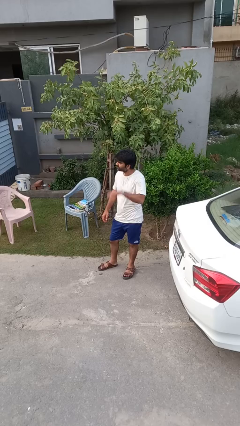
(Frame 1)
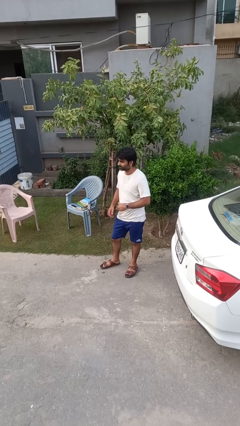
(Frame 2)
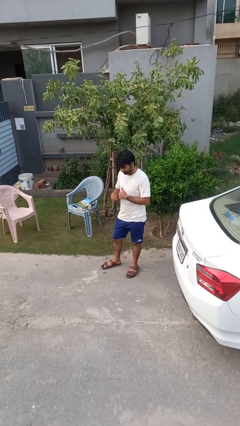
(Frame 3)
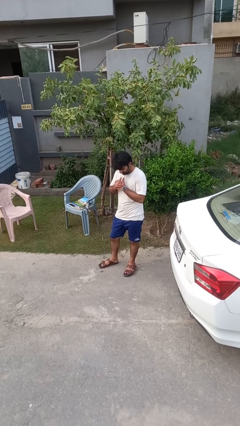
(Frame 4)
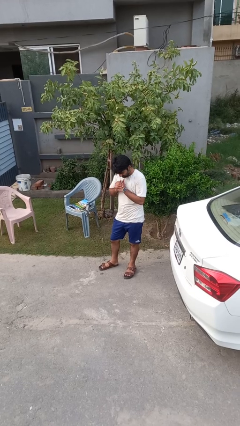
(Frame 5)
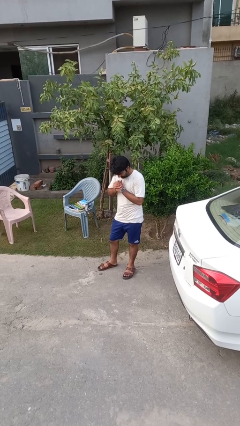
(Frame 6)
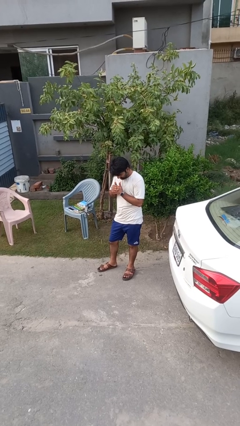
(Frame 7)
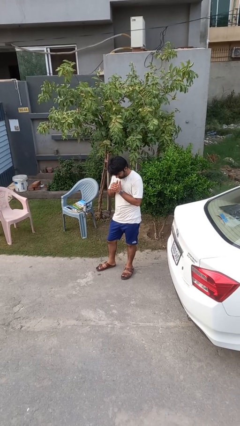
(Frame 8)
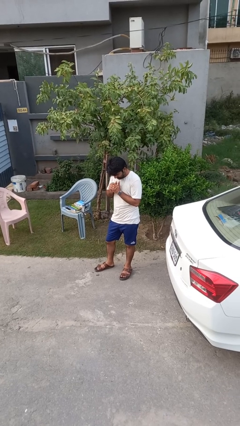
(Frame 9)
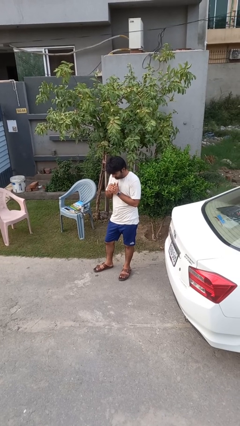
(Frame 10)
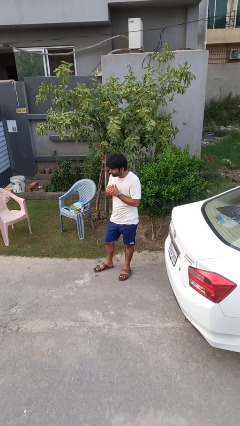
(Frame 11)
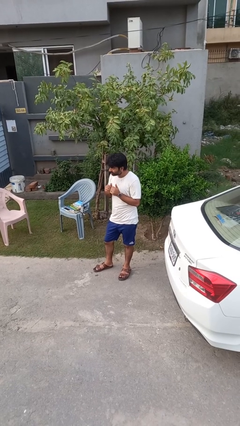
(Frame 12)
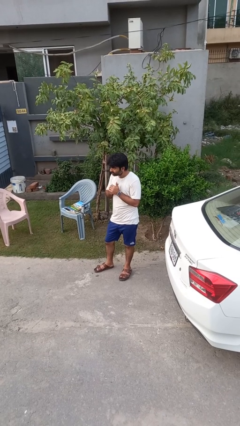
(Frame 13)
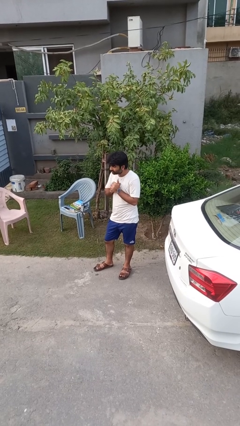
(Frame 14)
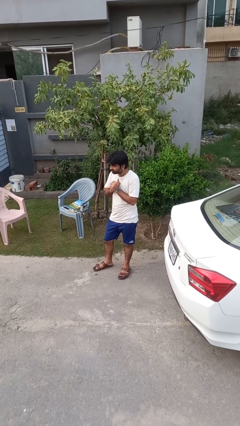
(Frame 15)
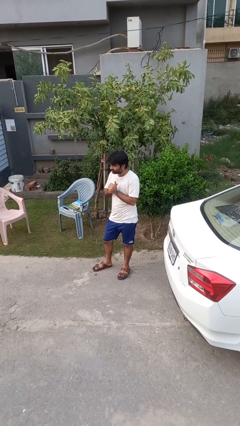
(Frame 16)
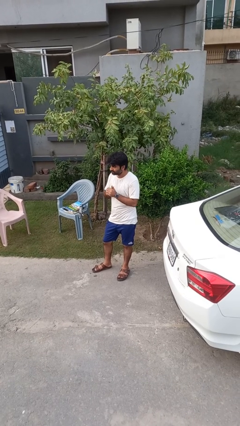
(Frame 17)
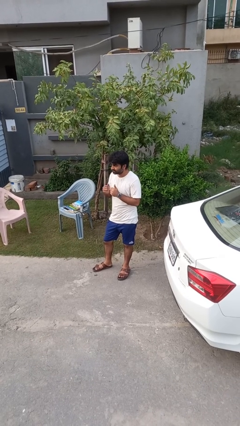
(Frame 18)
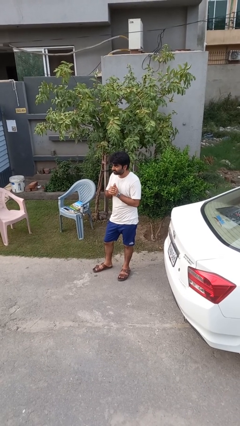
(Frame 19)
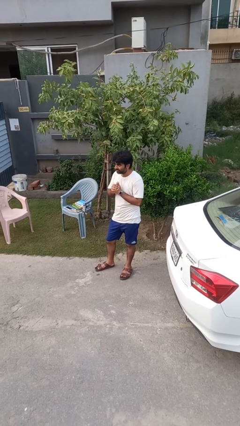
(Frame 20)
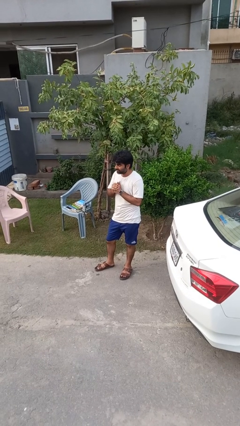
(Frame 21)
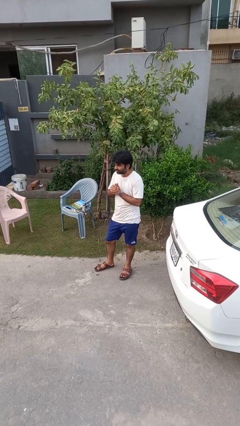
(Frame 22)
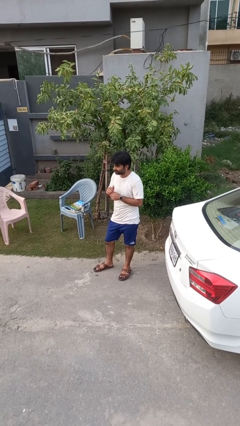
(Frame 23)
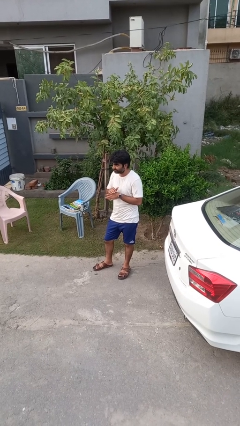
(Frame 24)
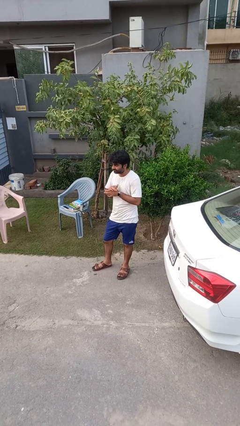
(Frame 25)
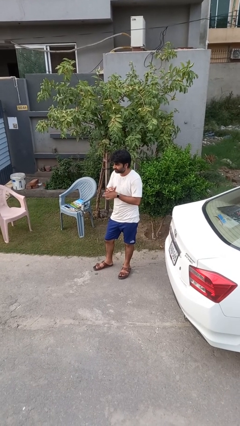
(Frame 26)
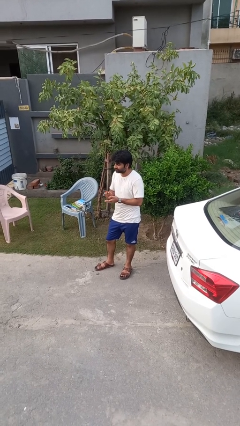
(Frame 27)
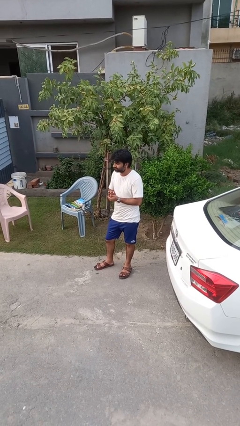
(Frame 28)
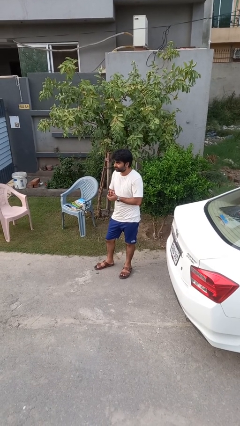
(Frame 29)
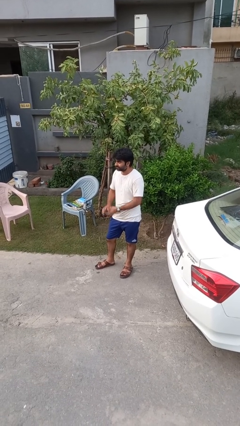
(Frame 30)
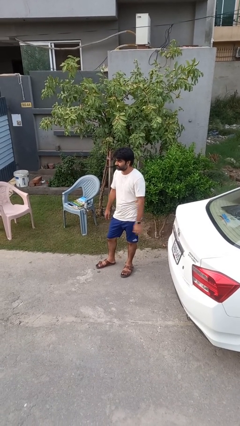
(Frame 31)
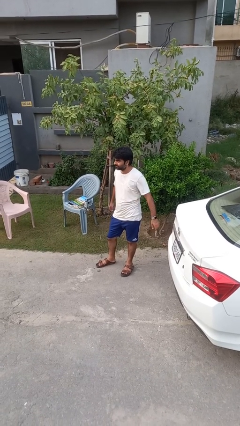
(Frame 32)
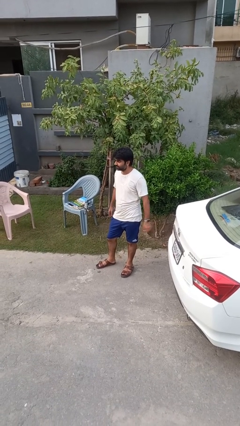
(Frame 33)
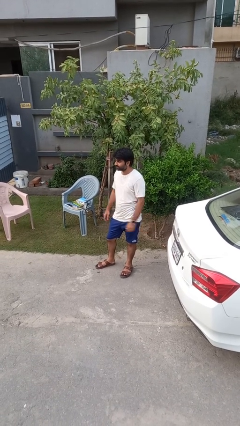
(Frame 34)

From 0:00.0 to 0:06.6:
person cracks knuckles

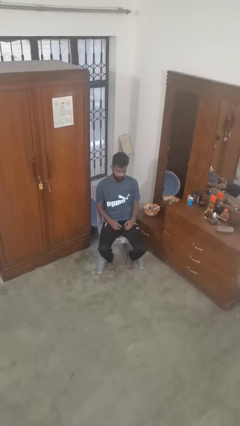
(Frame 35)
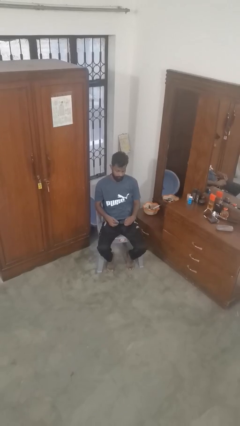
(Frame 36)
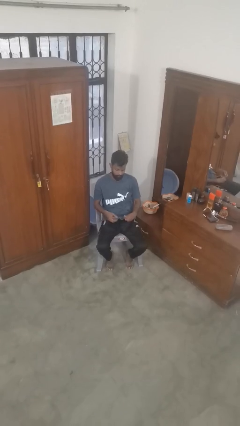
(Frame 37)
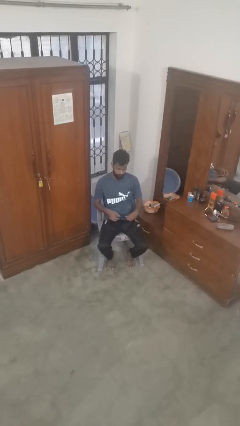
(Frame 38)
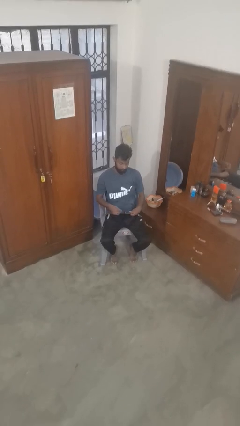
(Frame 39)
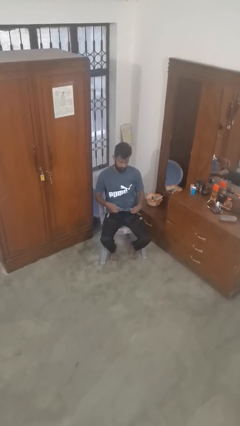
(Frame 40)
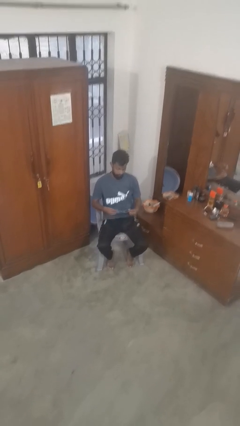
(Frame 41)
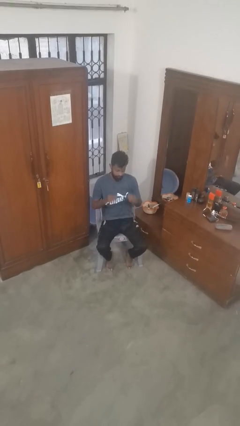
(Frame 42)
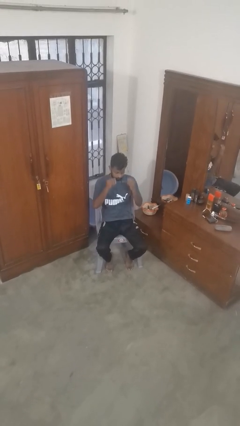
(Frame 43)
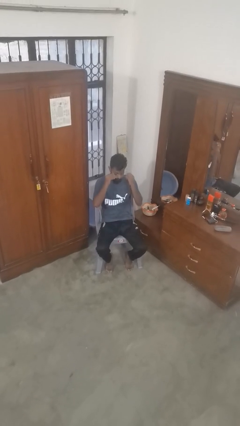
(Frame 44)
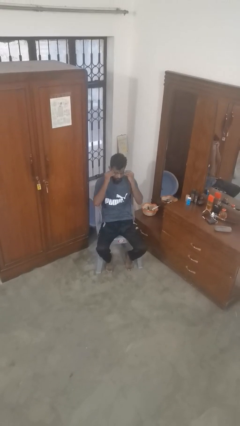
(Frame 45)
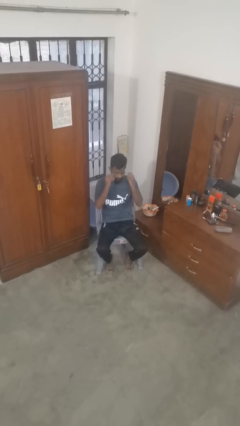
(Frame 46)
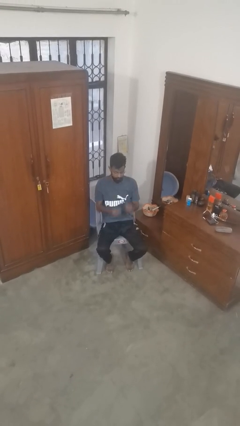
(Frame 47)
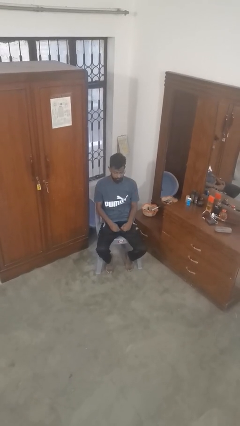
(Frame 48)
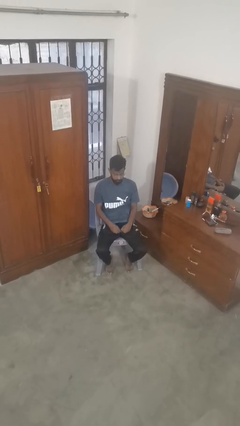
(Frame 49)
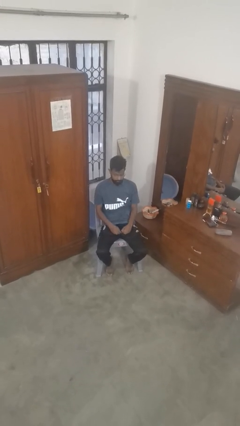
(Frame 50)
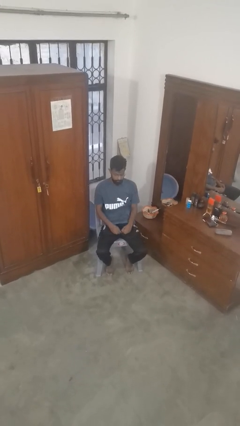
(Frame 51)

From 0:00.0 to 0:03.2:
person puts on glasses

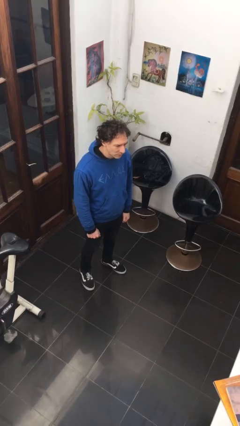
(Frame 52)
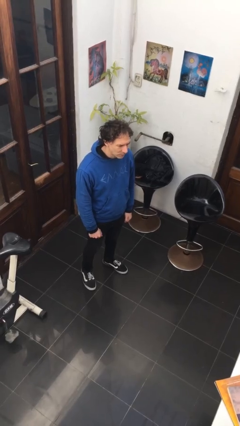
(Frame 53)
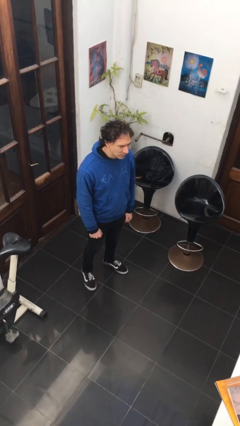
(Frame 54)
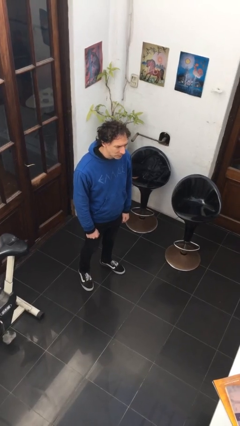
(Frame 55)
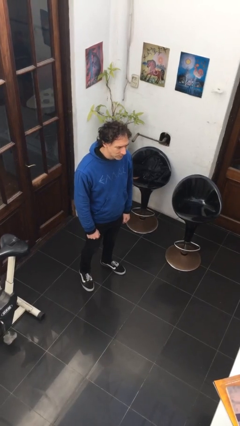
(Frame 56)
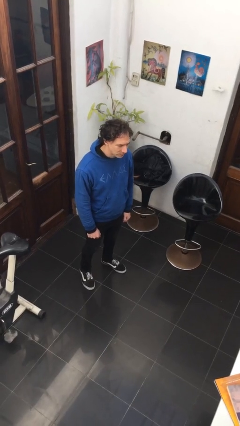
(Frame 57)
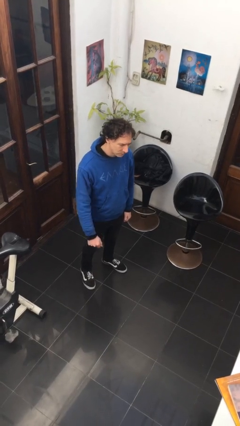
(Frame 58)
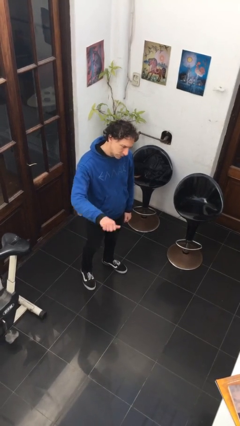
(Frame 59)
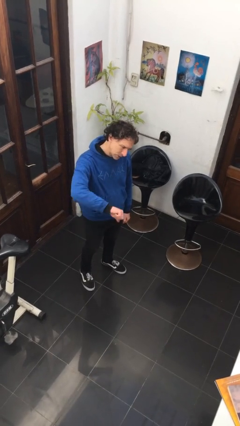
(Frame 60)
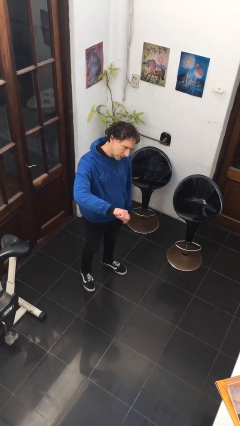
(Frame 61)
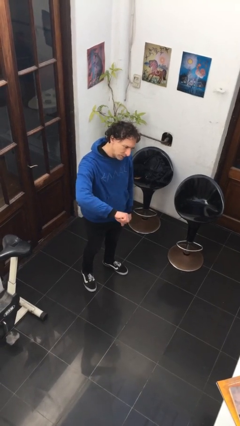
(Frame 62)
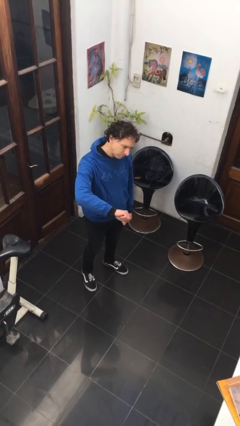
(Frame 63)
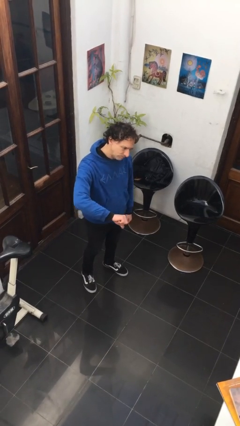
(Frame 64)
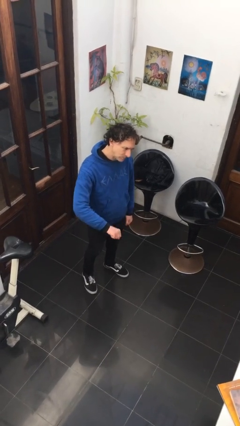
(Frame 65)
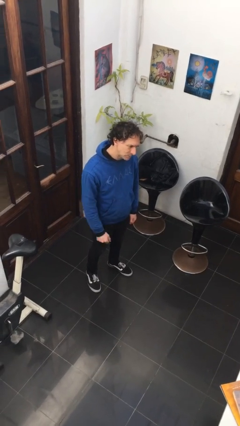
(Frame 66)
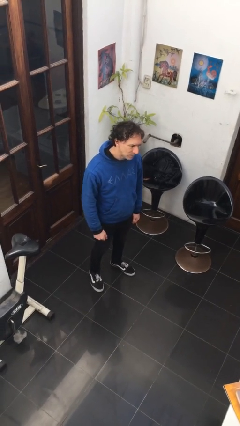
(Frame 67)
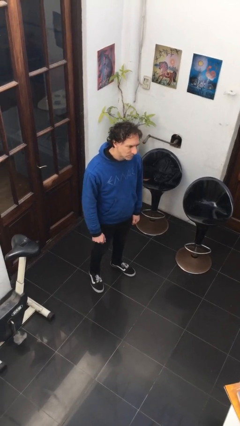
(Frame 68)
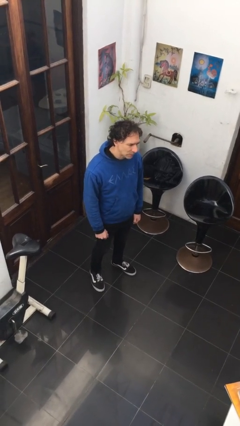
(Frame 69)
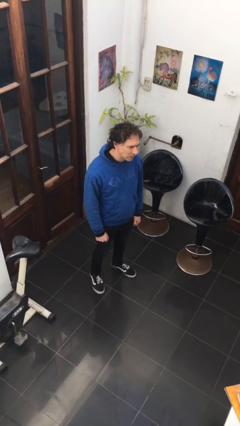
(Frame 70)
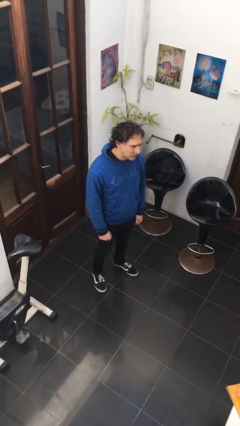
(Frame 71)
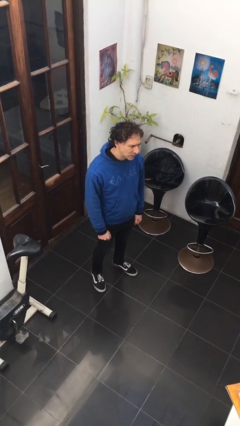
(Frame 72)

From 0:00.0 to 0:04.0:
person gestures thumbs down

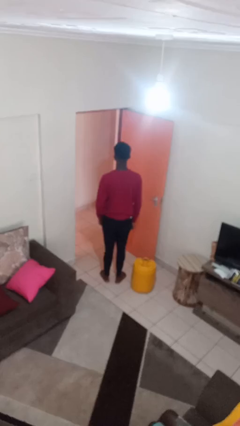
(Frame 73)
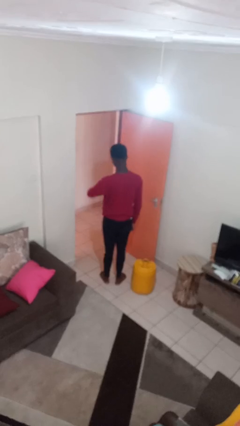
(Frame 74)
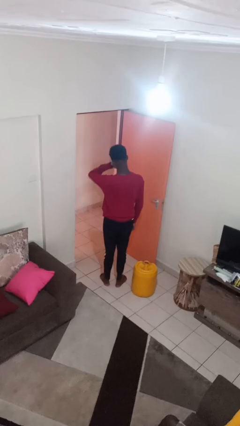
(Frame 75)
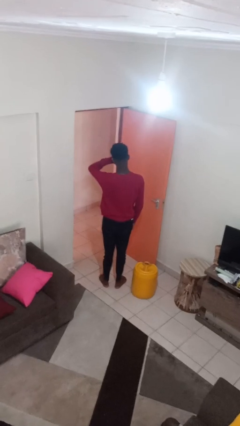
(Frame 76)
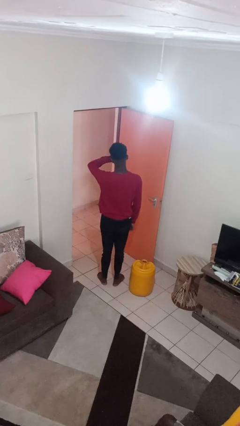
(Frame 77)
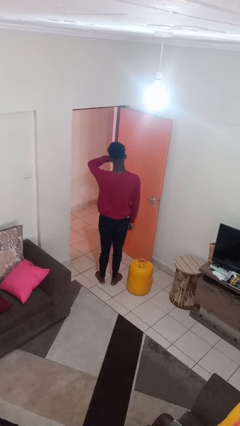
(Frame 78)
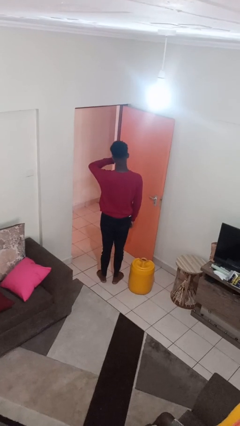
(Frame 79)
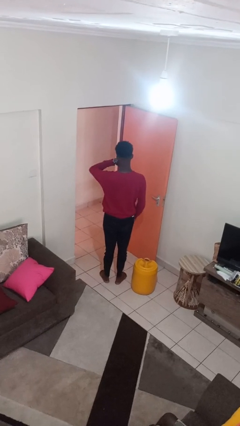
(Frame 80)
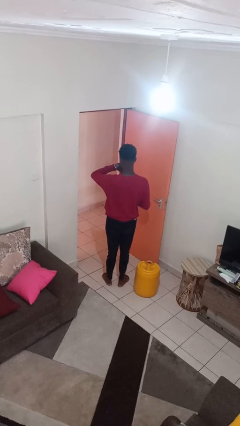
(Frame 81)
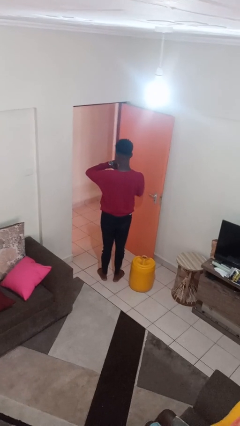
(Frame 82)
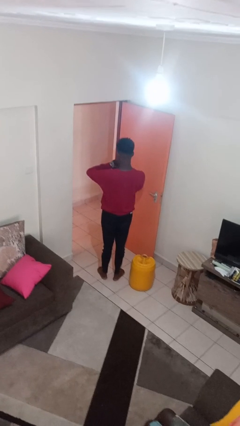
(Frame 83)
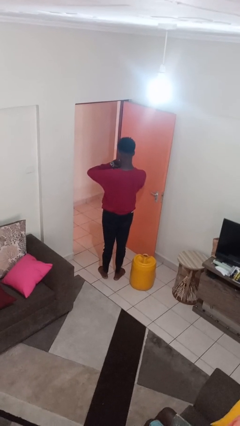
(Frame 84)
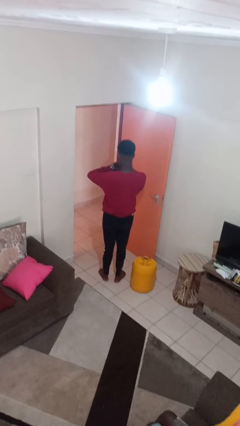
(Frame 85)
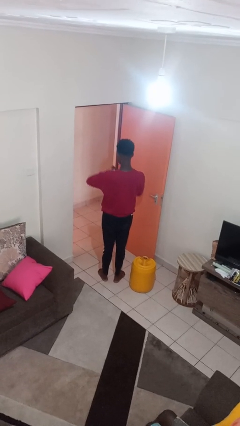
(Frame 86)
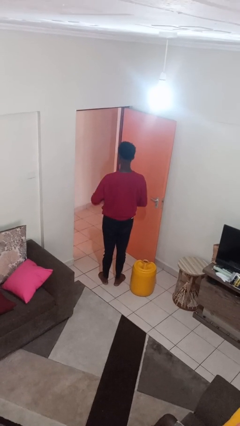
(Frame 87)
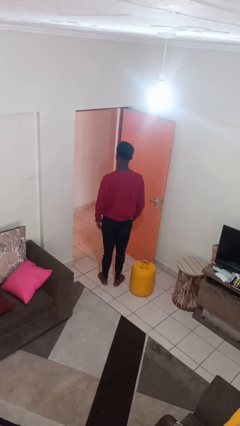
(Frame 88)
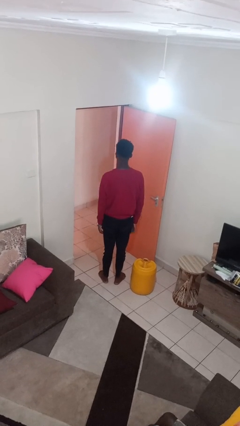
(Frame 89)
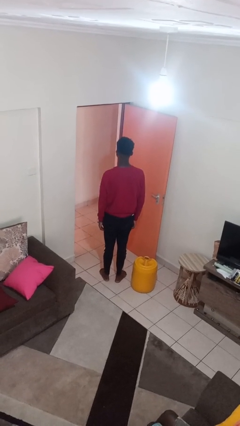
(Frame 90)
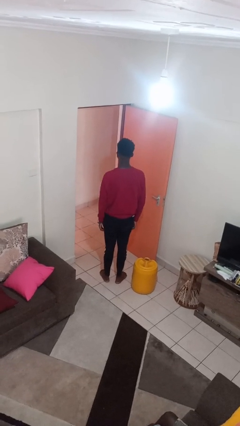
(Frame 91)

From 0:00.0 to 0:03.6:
person looks at wristwatch

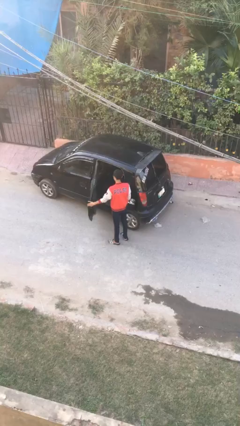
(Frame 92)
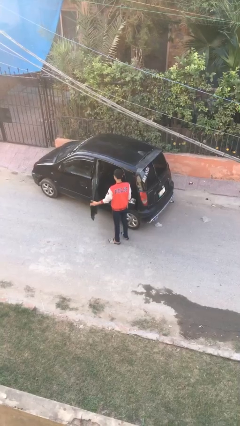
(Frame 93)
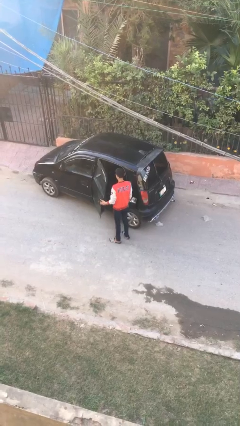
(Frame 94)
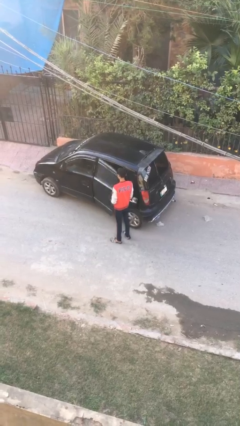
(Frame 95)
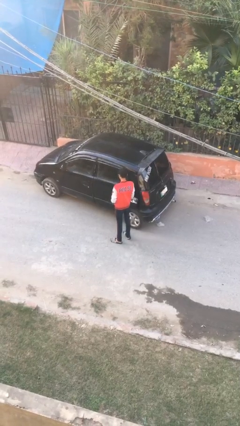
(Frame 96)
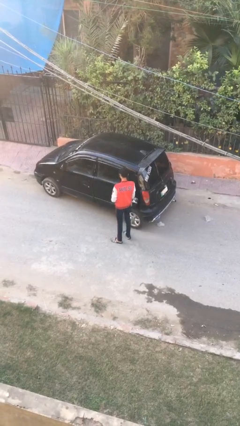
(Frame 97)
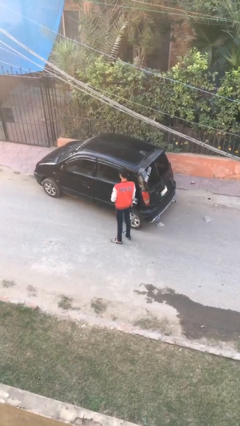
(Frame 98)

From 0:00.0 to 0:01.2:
person closes car door
